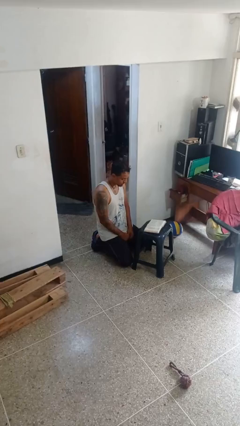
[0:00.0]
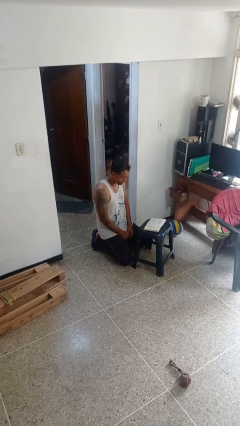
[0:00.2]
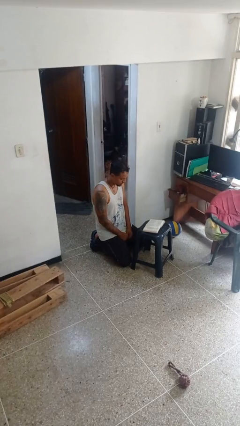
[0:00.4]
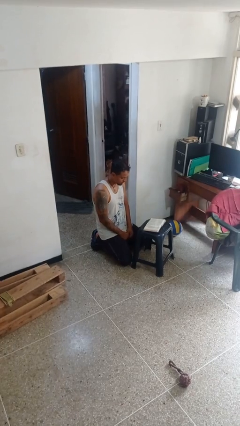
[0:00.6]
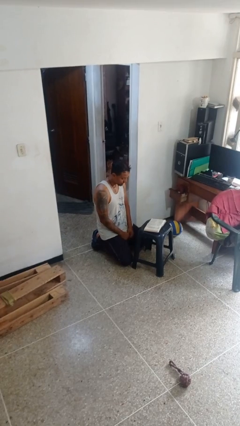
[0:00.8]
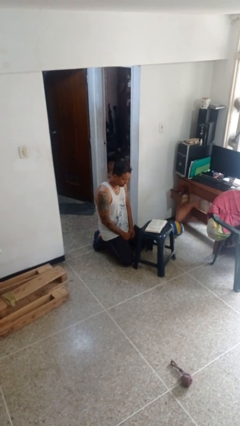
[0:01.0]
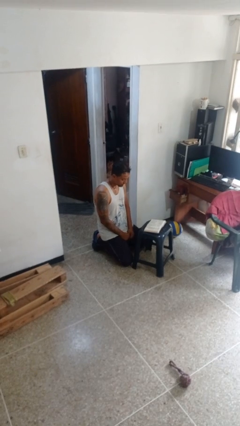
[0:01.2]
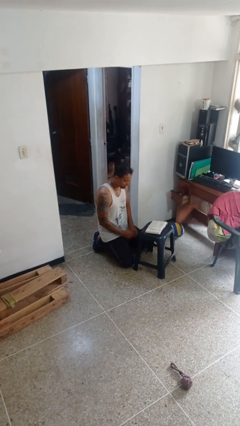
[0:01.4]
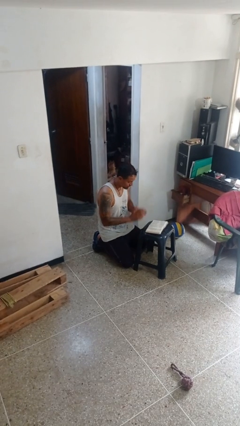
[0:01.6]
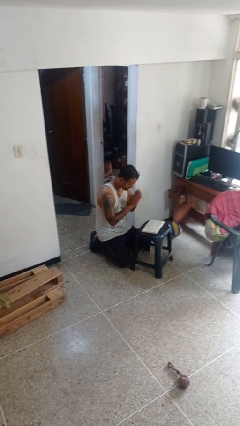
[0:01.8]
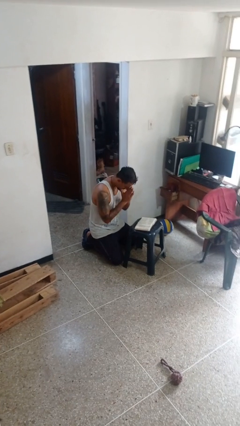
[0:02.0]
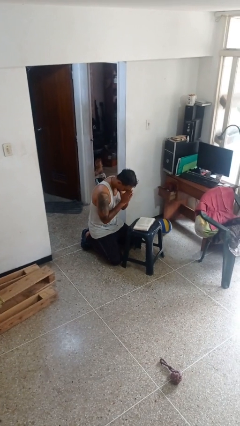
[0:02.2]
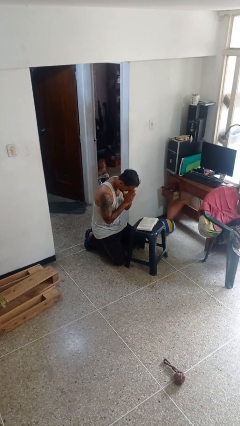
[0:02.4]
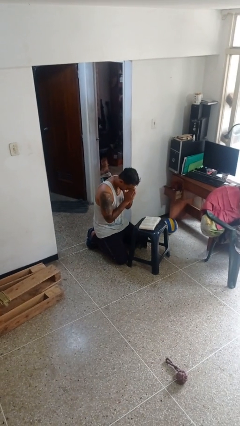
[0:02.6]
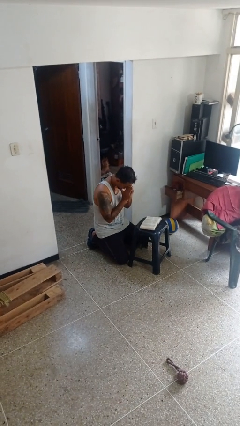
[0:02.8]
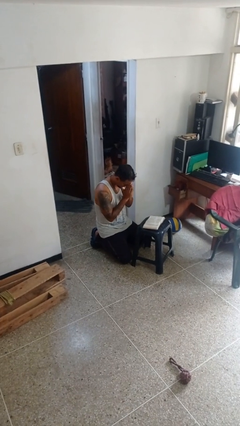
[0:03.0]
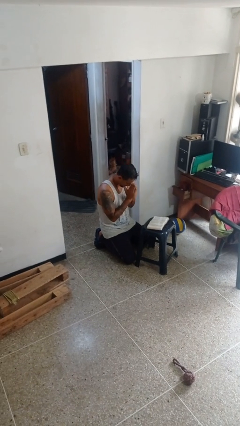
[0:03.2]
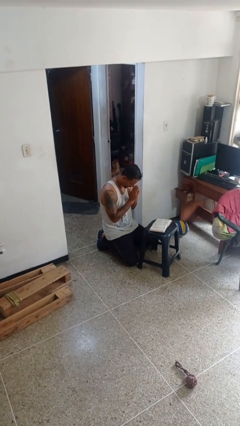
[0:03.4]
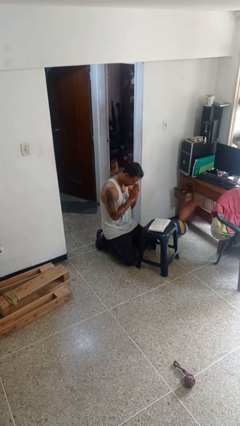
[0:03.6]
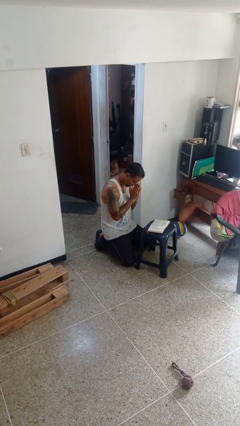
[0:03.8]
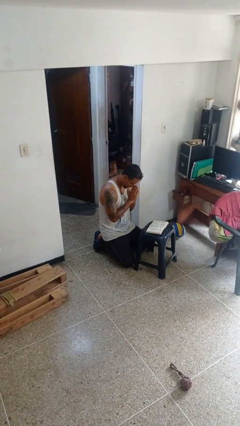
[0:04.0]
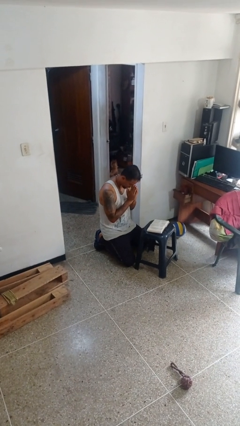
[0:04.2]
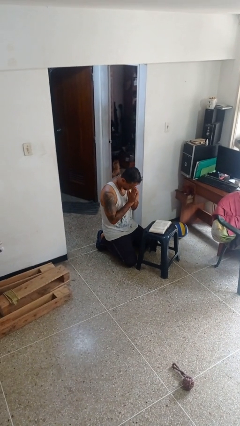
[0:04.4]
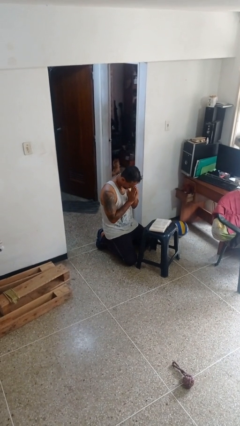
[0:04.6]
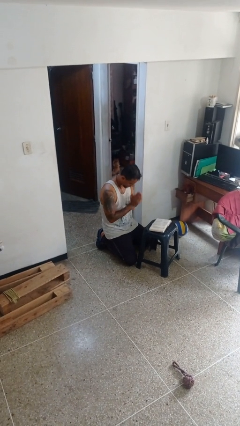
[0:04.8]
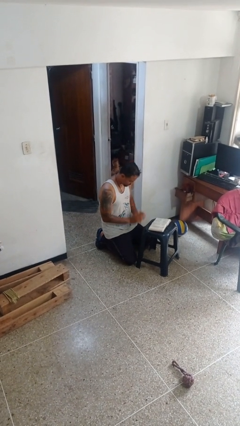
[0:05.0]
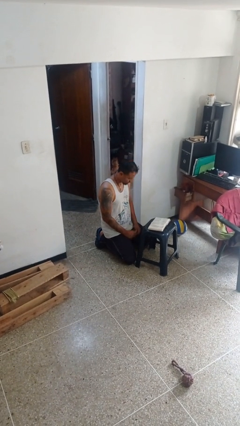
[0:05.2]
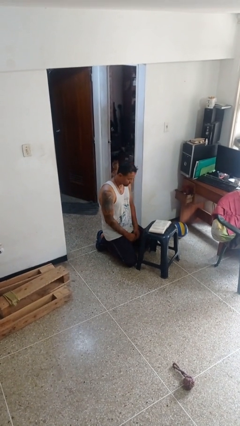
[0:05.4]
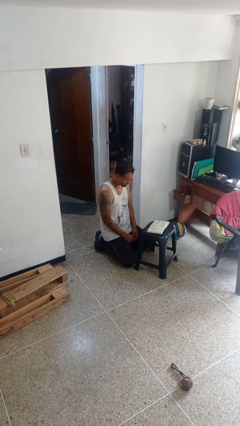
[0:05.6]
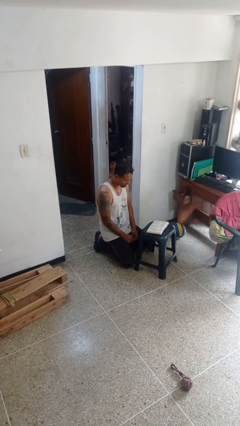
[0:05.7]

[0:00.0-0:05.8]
person prays

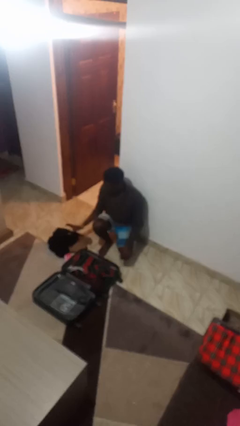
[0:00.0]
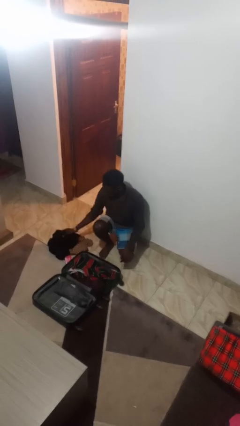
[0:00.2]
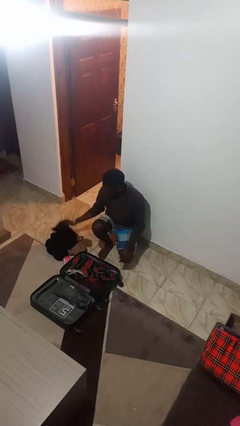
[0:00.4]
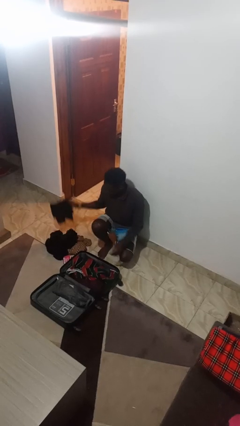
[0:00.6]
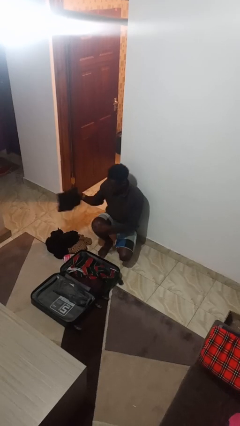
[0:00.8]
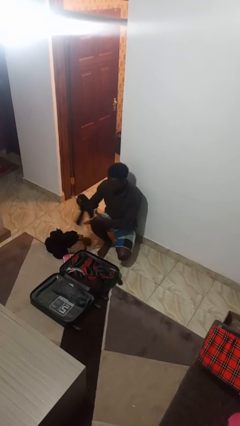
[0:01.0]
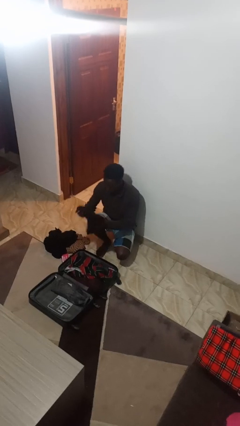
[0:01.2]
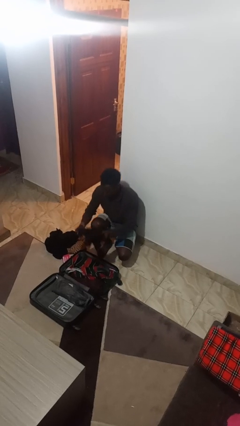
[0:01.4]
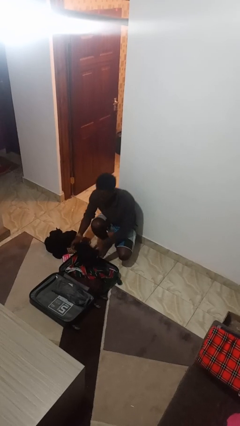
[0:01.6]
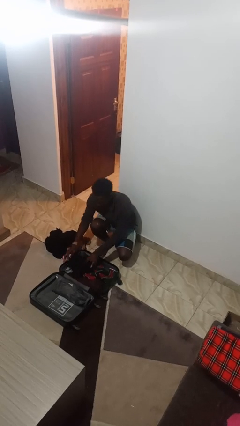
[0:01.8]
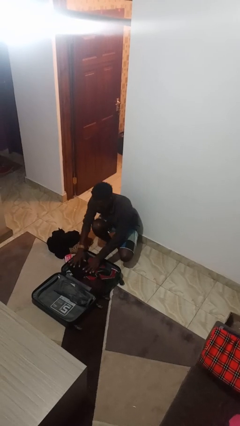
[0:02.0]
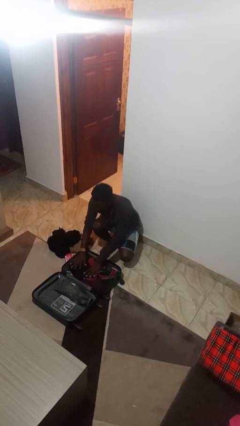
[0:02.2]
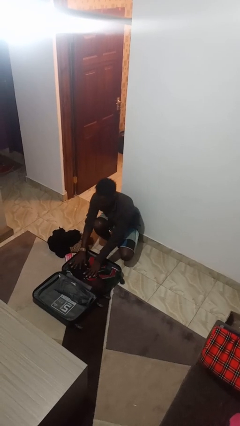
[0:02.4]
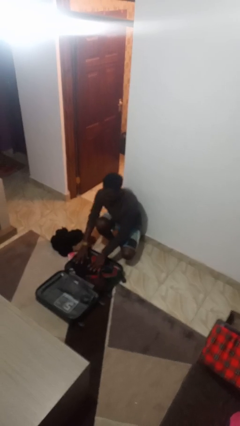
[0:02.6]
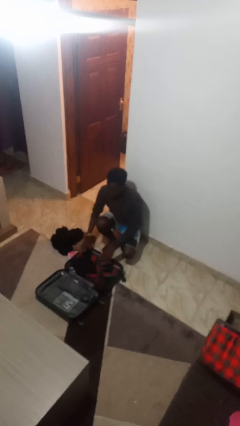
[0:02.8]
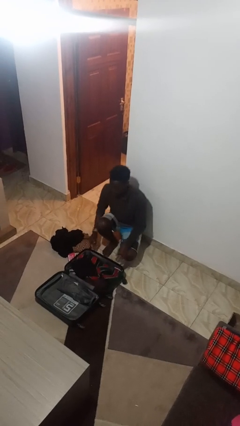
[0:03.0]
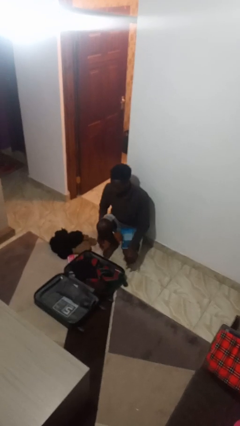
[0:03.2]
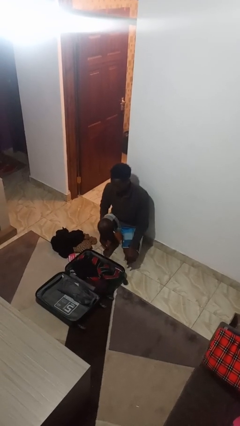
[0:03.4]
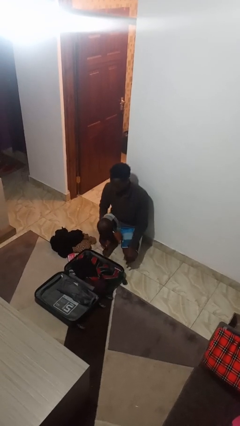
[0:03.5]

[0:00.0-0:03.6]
person loads clothes into suitcase

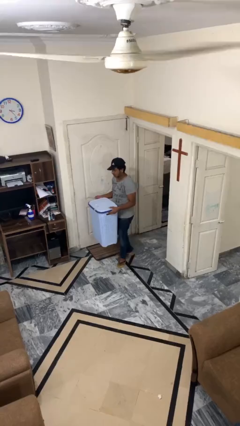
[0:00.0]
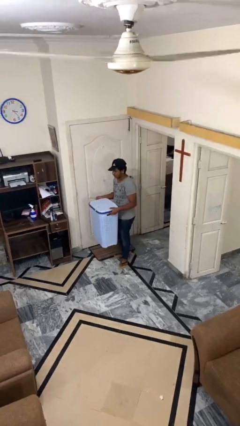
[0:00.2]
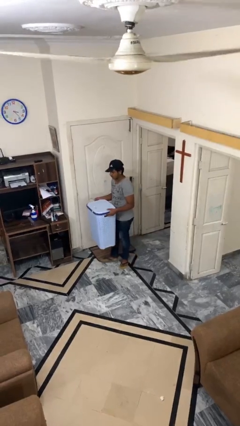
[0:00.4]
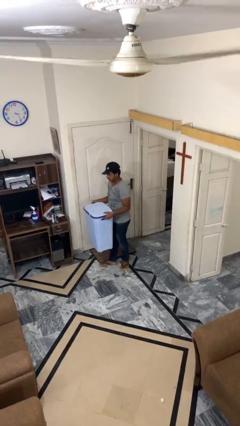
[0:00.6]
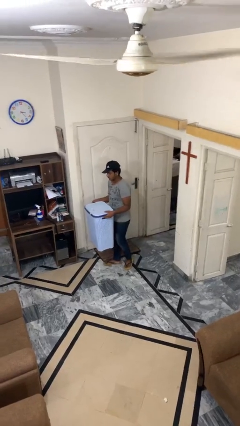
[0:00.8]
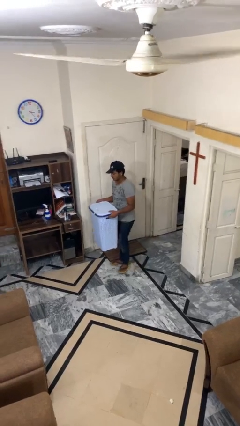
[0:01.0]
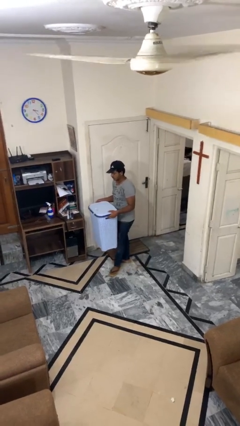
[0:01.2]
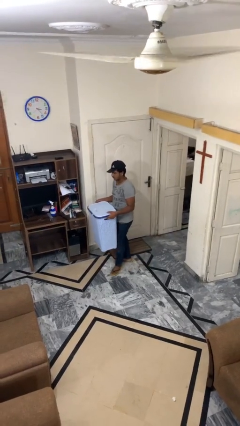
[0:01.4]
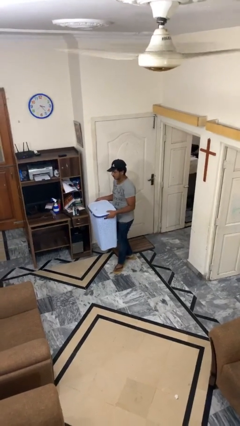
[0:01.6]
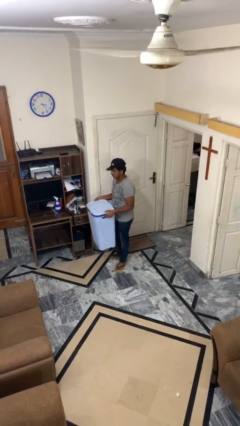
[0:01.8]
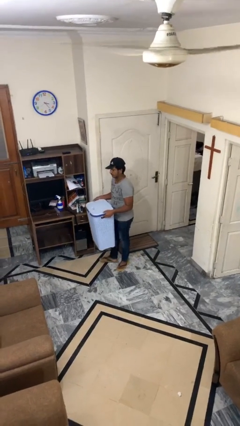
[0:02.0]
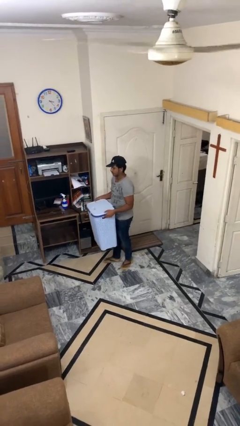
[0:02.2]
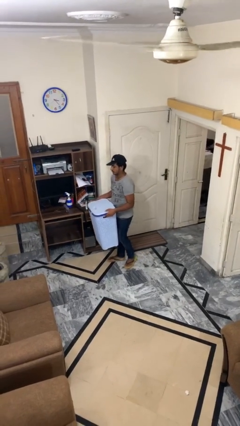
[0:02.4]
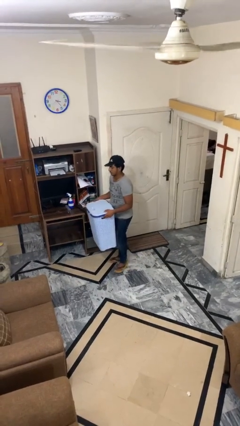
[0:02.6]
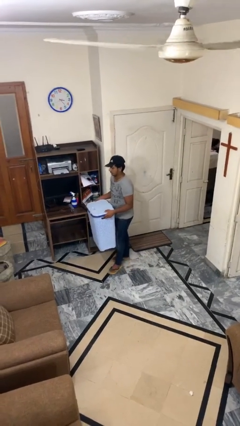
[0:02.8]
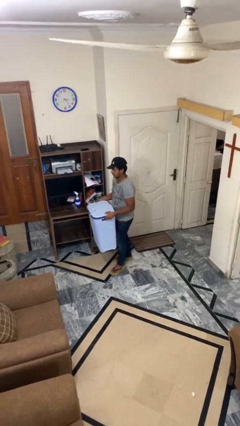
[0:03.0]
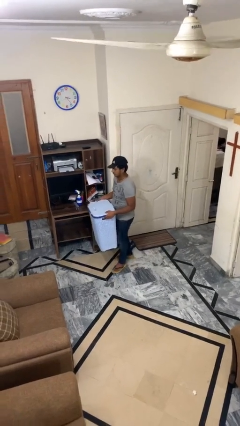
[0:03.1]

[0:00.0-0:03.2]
person carries heavy object

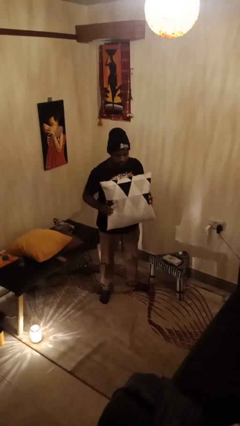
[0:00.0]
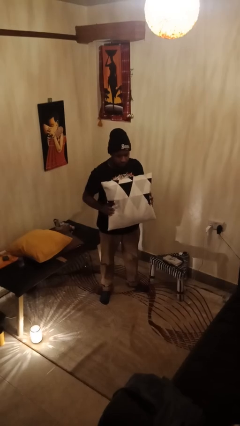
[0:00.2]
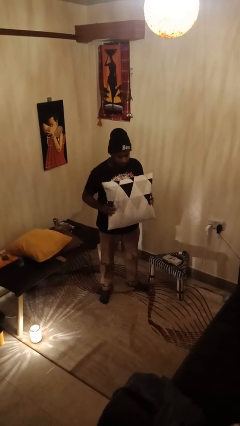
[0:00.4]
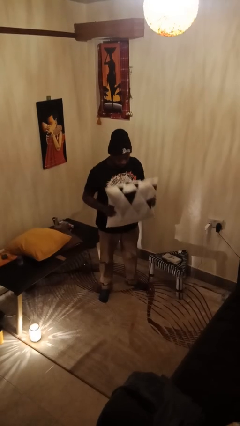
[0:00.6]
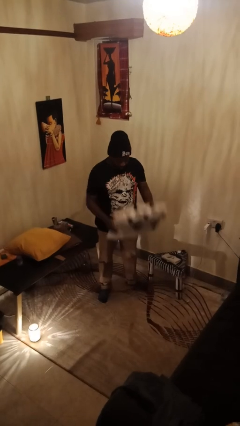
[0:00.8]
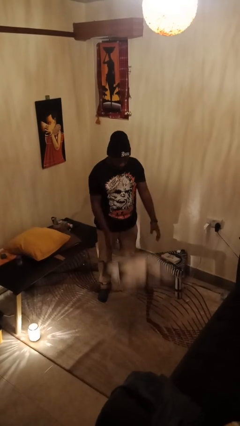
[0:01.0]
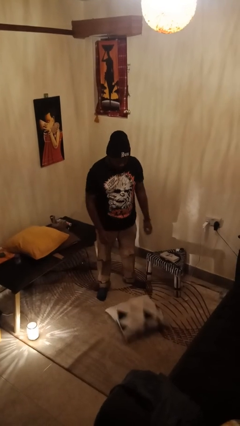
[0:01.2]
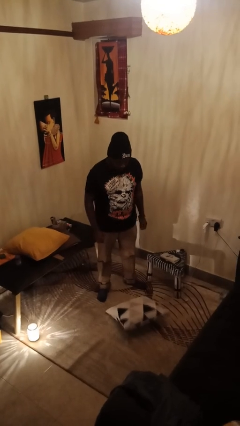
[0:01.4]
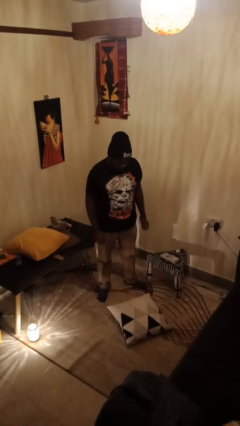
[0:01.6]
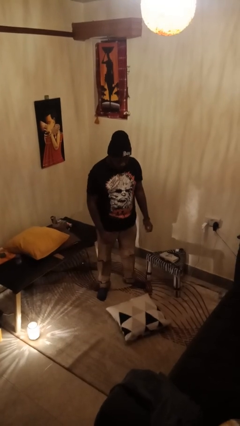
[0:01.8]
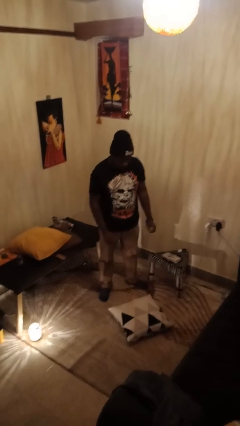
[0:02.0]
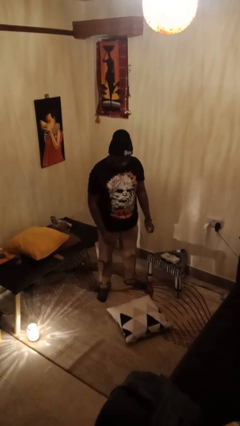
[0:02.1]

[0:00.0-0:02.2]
person drops object

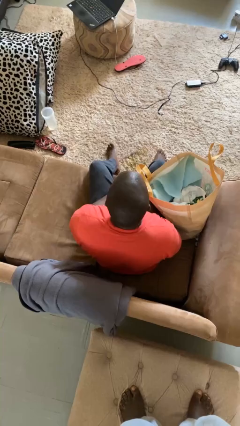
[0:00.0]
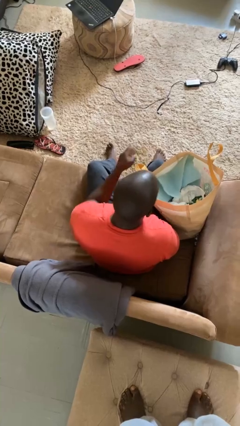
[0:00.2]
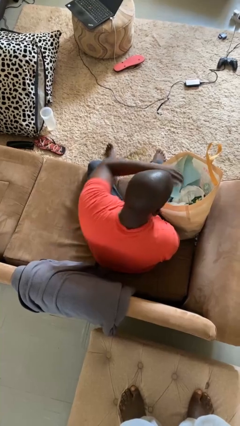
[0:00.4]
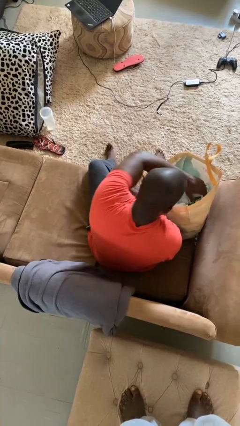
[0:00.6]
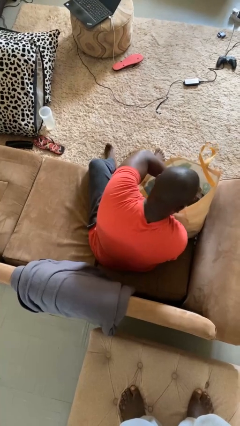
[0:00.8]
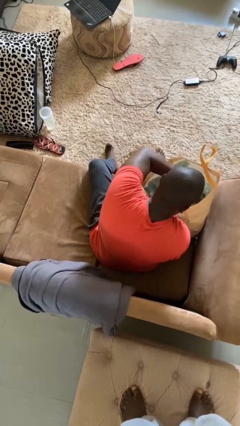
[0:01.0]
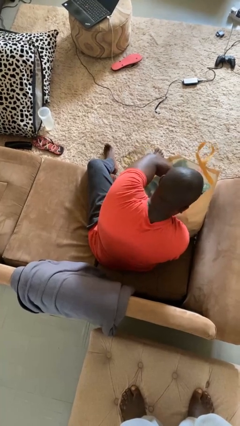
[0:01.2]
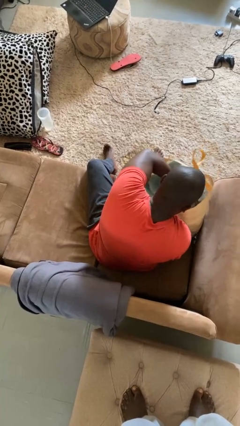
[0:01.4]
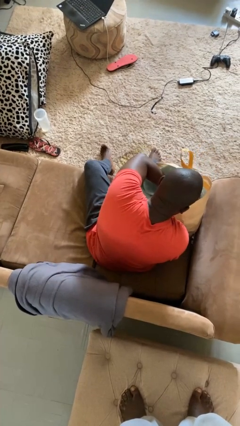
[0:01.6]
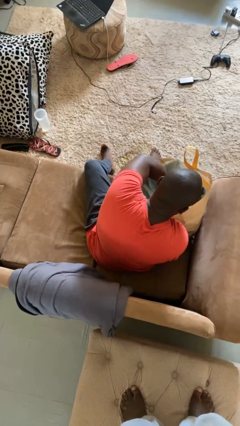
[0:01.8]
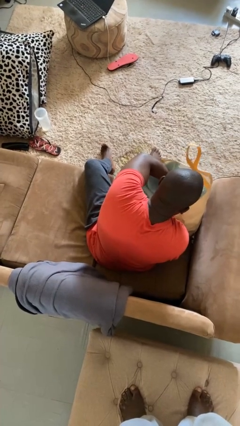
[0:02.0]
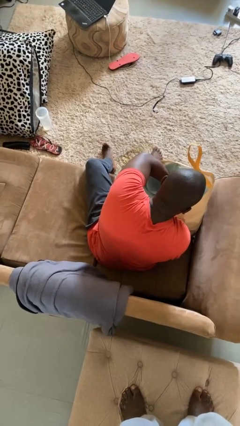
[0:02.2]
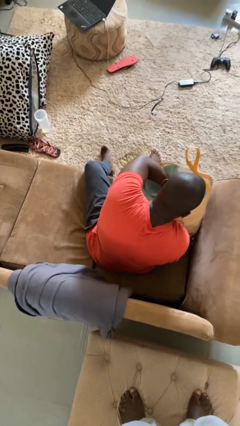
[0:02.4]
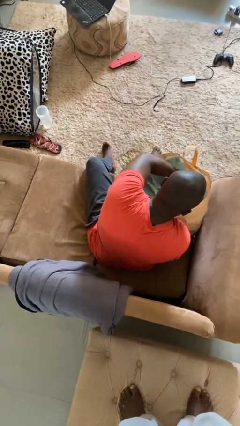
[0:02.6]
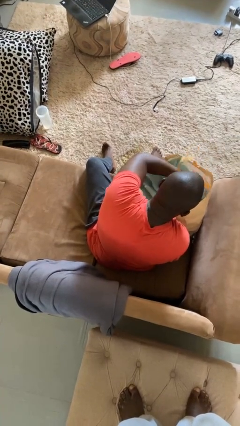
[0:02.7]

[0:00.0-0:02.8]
person searches in bag
